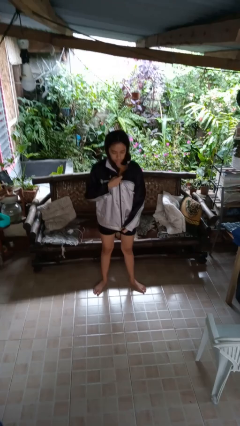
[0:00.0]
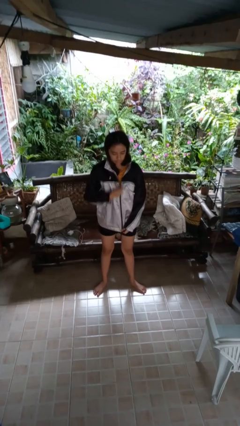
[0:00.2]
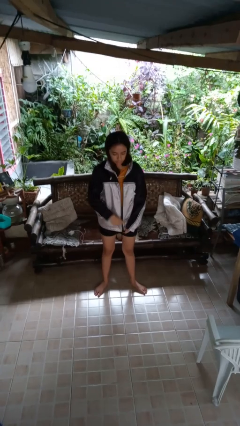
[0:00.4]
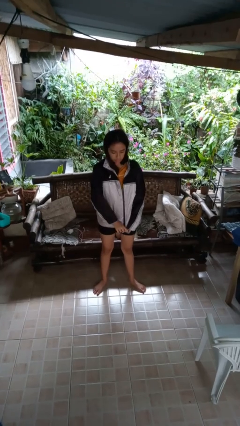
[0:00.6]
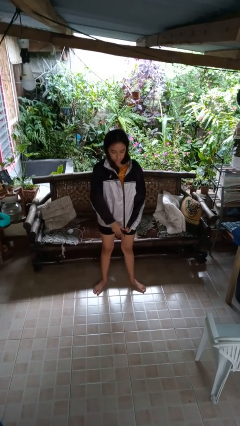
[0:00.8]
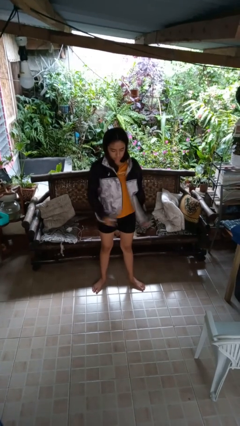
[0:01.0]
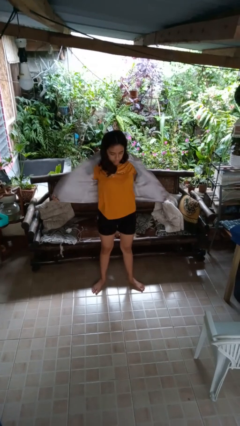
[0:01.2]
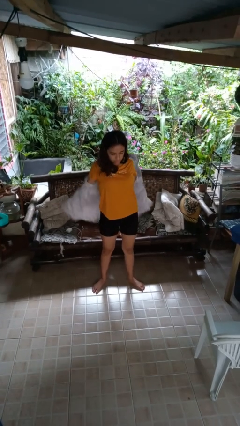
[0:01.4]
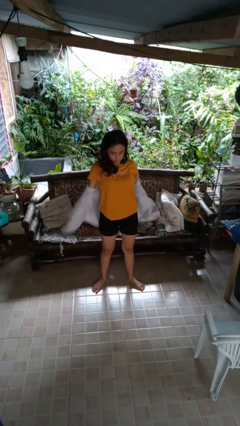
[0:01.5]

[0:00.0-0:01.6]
person unzips jacket

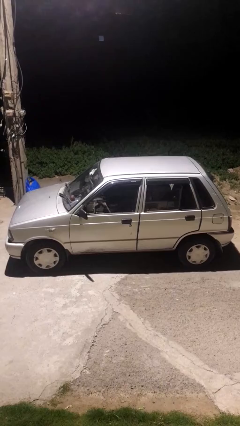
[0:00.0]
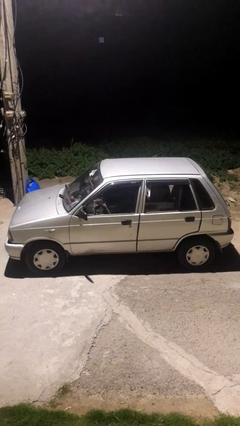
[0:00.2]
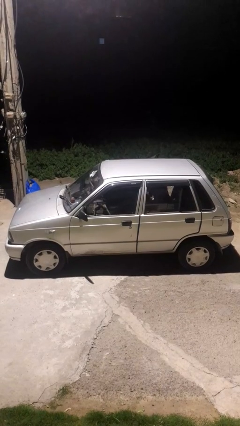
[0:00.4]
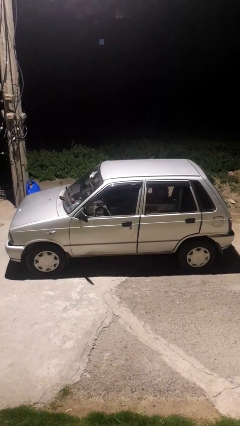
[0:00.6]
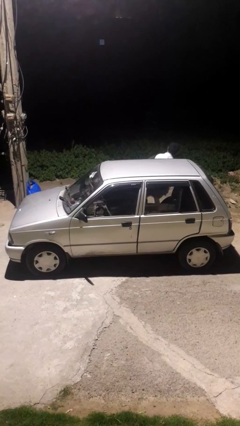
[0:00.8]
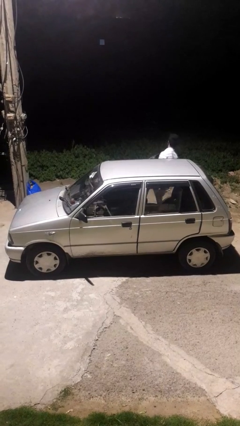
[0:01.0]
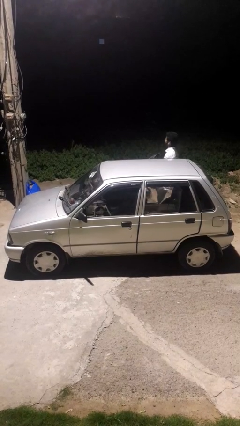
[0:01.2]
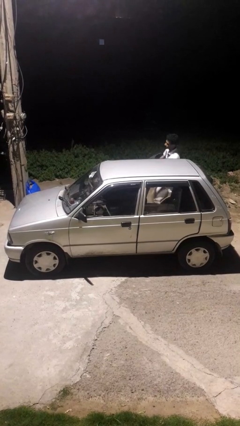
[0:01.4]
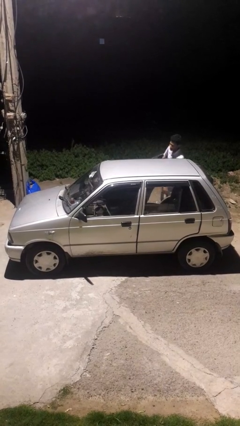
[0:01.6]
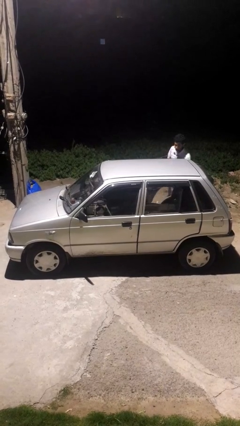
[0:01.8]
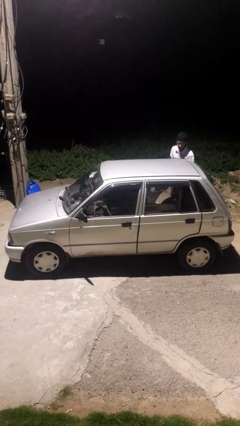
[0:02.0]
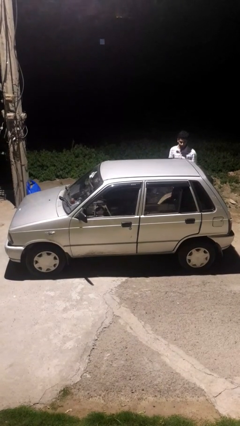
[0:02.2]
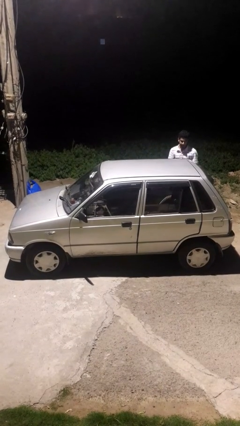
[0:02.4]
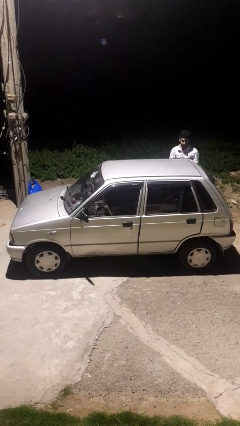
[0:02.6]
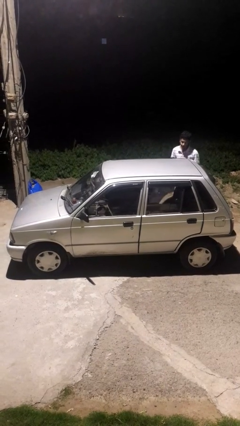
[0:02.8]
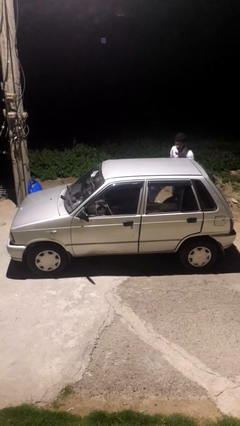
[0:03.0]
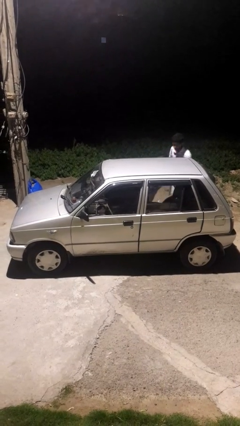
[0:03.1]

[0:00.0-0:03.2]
car drops off person

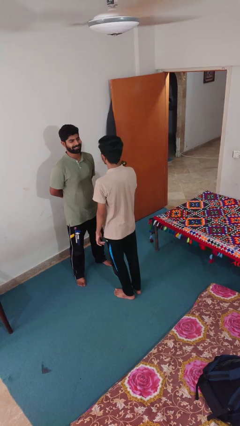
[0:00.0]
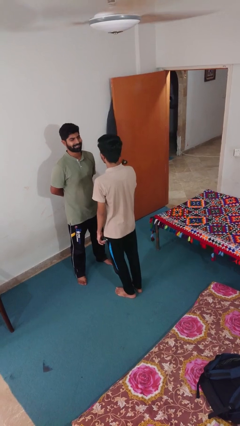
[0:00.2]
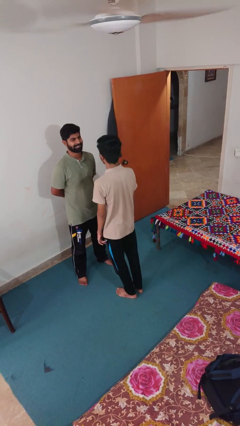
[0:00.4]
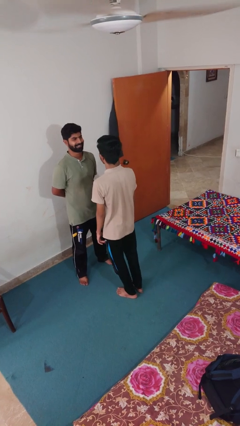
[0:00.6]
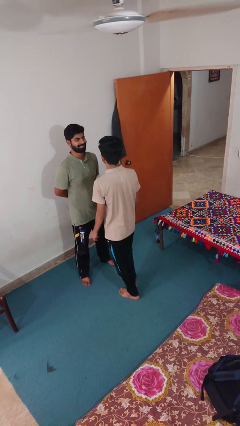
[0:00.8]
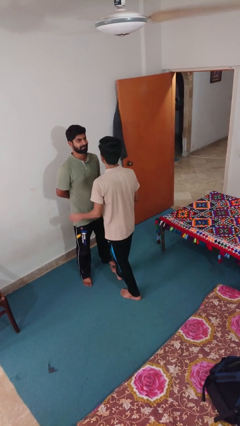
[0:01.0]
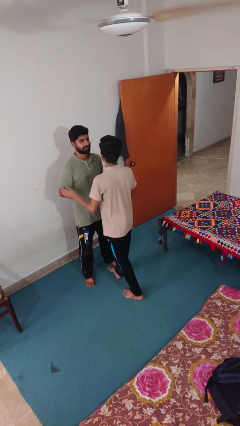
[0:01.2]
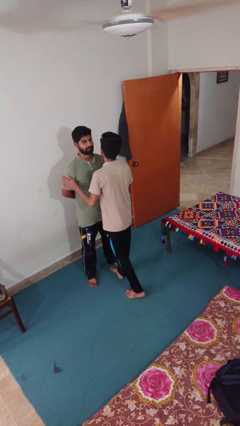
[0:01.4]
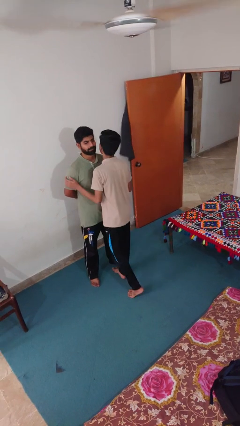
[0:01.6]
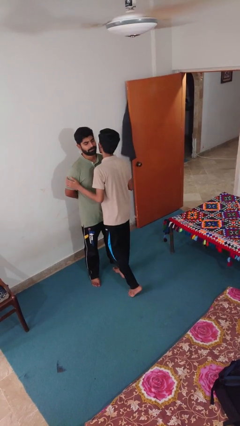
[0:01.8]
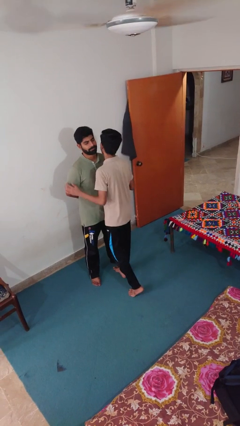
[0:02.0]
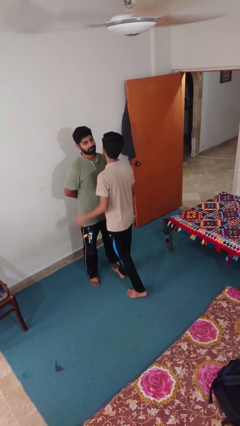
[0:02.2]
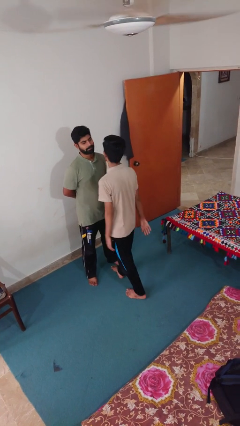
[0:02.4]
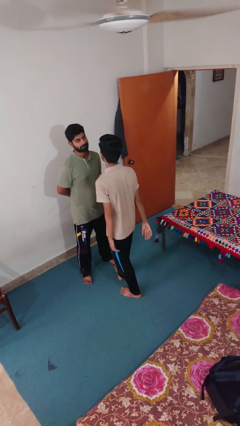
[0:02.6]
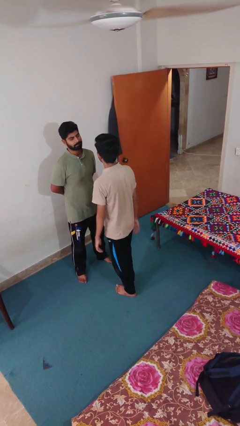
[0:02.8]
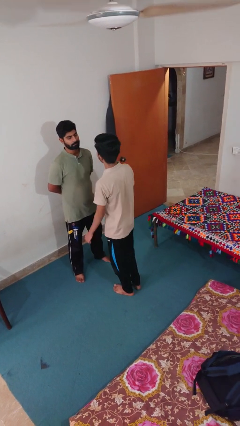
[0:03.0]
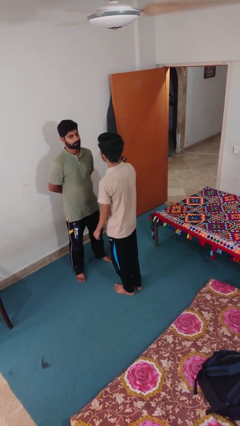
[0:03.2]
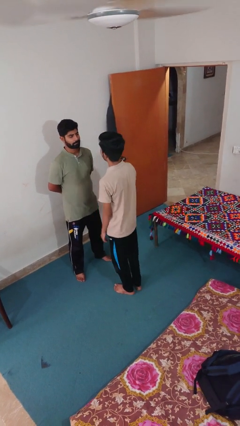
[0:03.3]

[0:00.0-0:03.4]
person kisses cheek of person

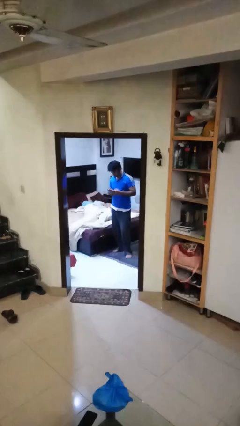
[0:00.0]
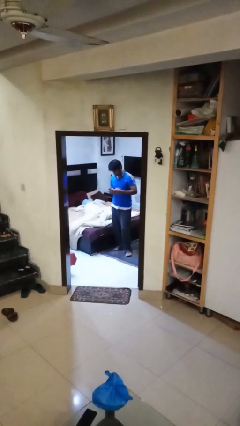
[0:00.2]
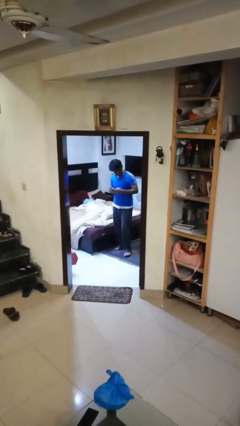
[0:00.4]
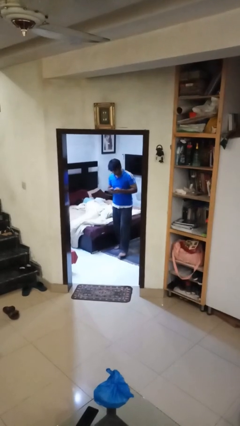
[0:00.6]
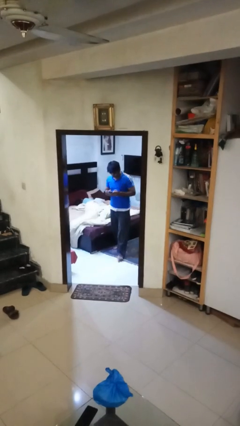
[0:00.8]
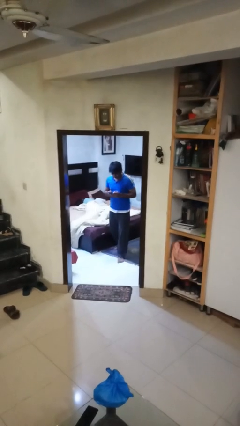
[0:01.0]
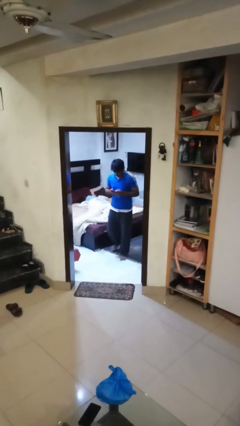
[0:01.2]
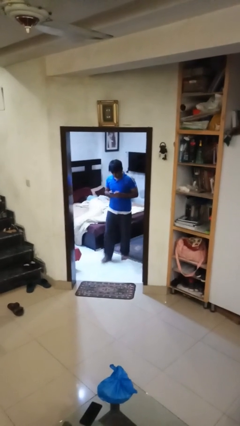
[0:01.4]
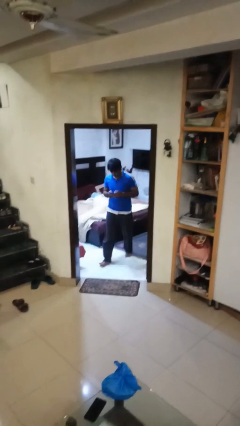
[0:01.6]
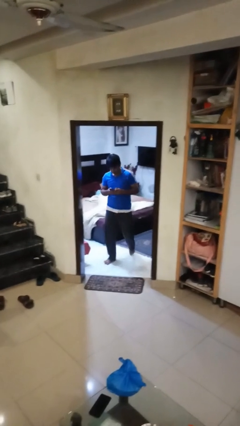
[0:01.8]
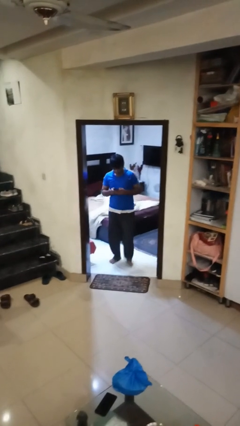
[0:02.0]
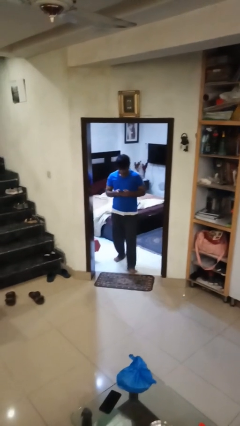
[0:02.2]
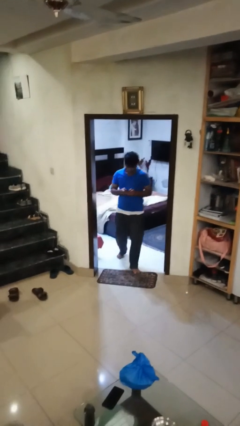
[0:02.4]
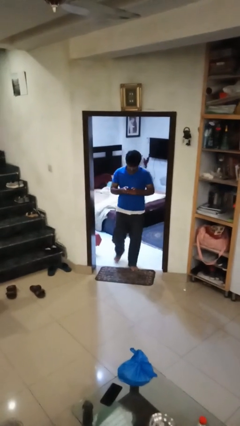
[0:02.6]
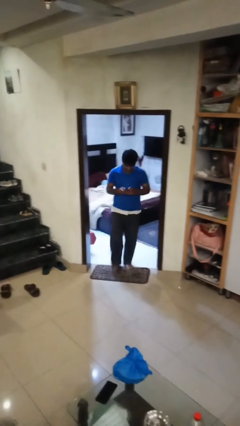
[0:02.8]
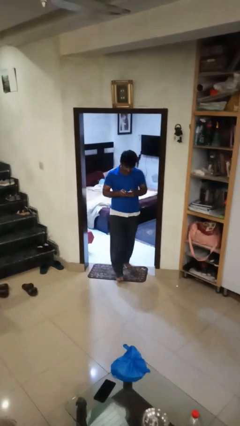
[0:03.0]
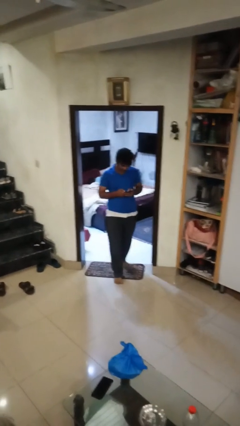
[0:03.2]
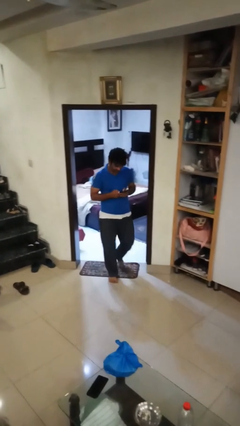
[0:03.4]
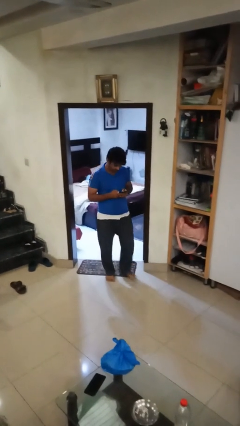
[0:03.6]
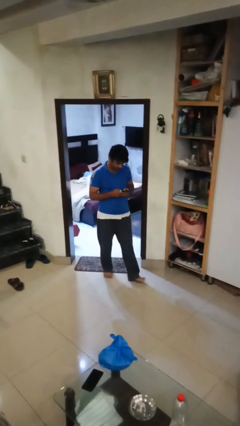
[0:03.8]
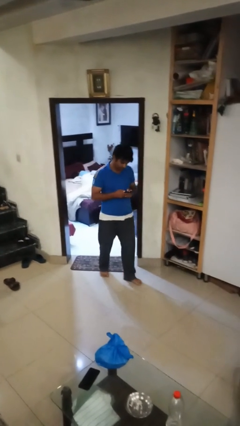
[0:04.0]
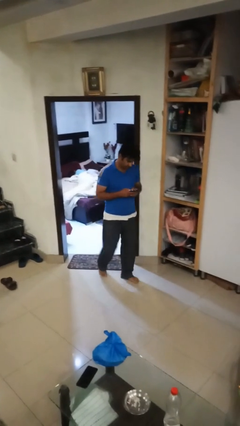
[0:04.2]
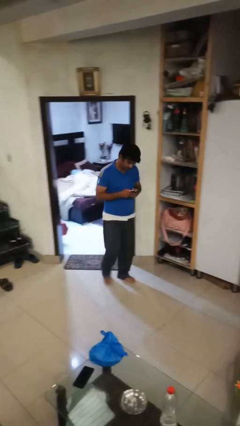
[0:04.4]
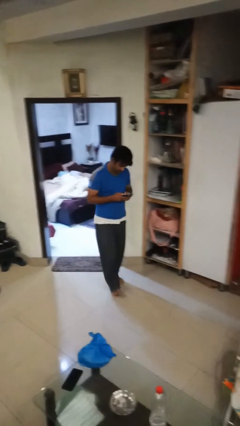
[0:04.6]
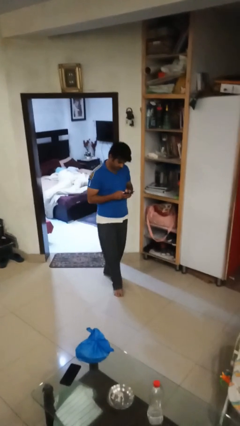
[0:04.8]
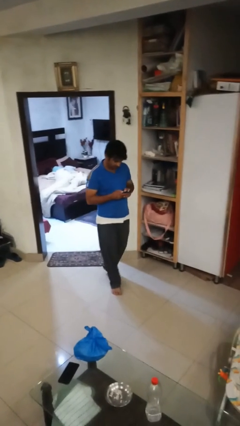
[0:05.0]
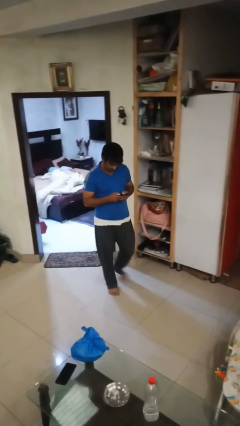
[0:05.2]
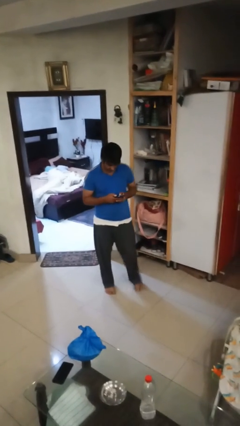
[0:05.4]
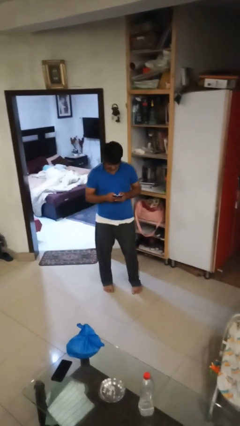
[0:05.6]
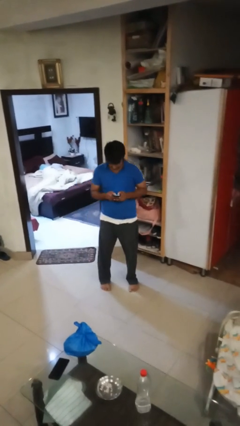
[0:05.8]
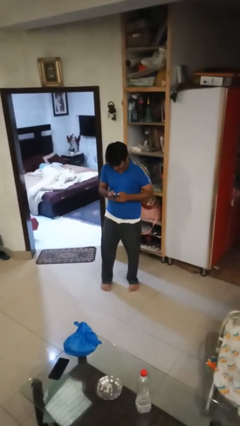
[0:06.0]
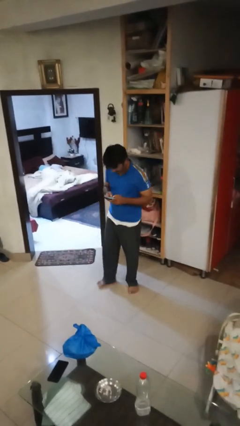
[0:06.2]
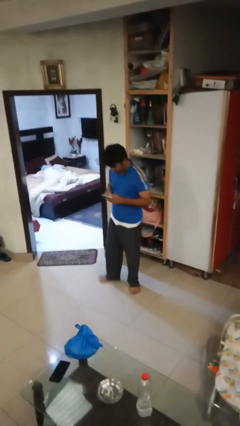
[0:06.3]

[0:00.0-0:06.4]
person enters scene through structure

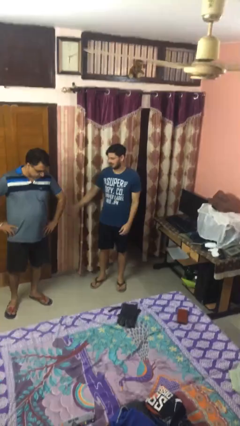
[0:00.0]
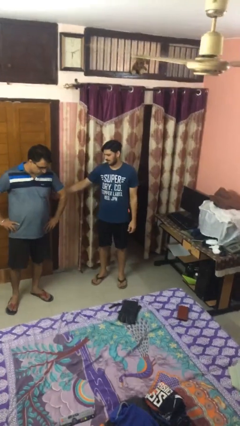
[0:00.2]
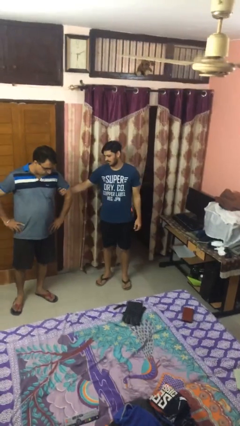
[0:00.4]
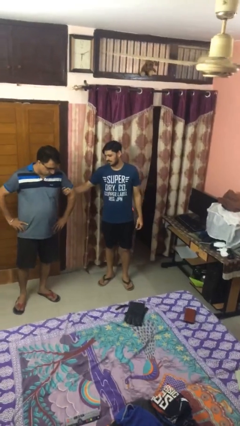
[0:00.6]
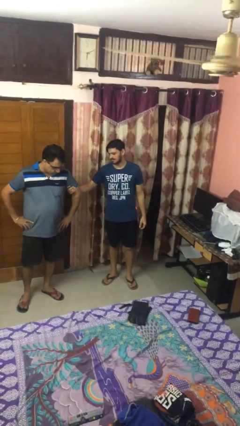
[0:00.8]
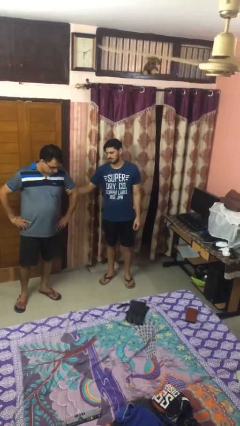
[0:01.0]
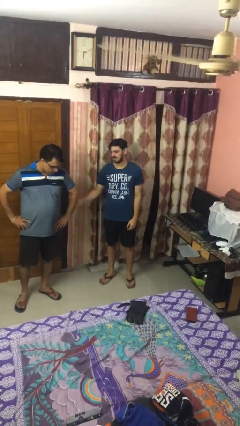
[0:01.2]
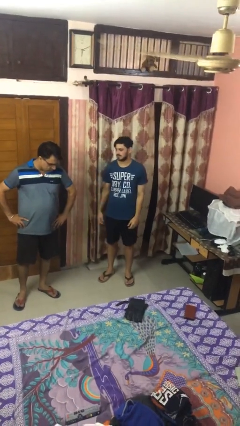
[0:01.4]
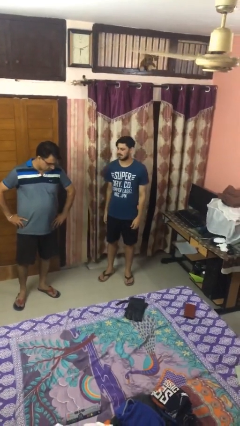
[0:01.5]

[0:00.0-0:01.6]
person grabs person by bicep

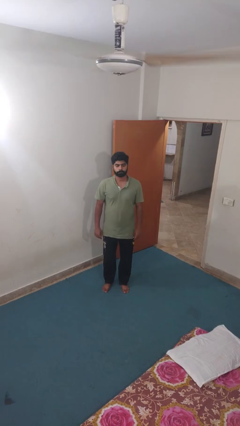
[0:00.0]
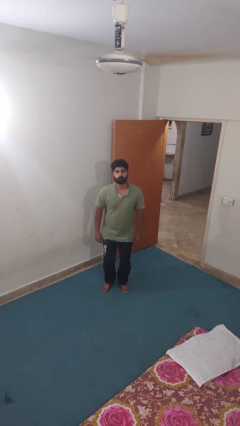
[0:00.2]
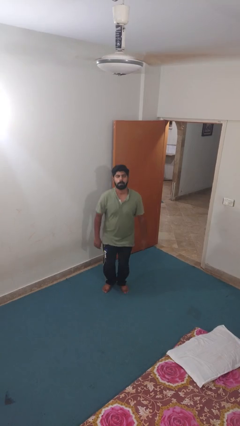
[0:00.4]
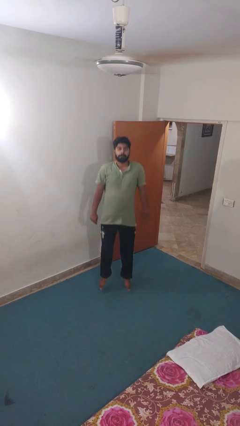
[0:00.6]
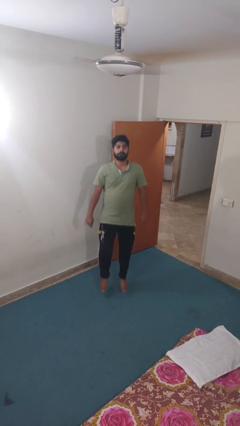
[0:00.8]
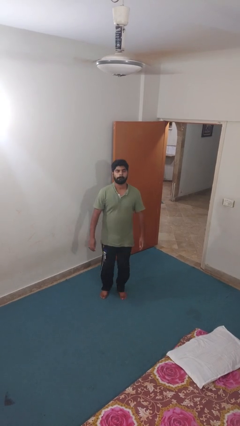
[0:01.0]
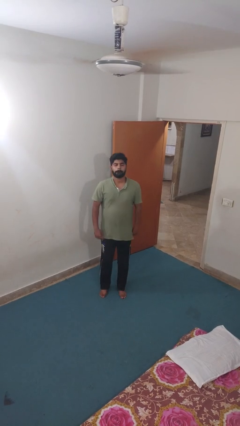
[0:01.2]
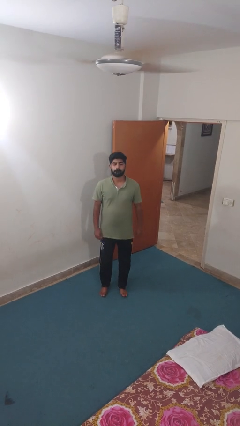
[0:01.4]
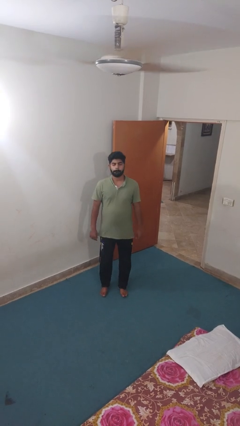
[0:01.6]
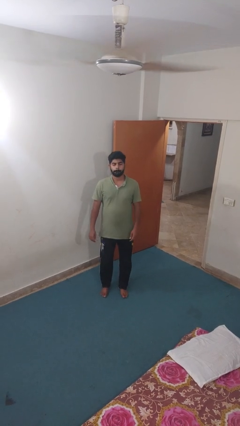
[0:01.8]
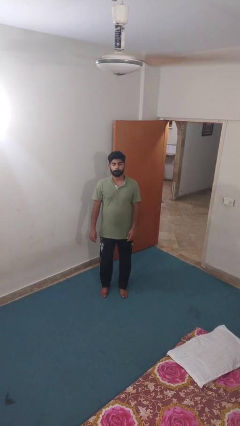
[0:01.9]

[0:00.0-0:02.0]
person jumps
